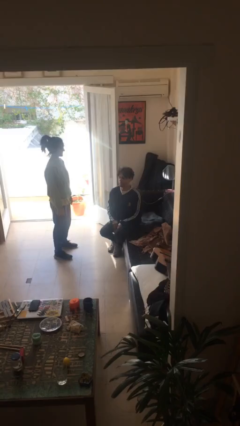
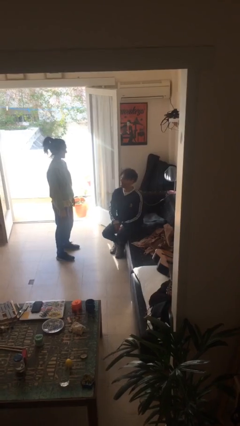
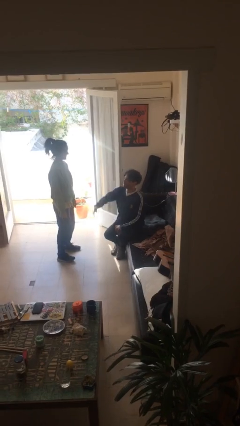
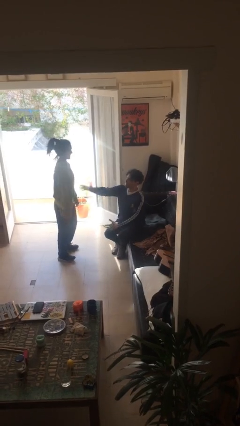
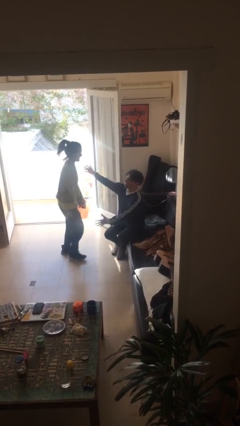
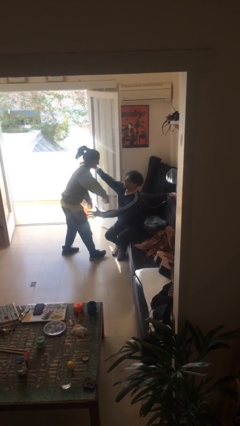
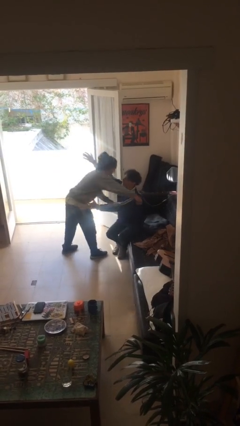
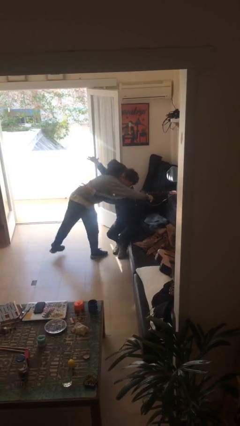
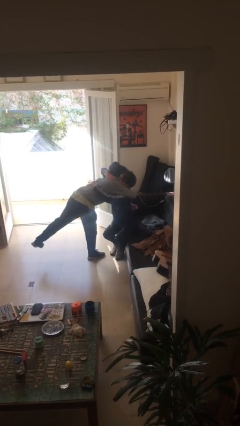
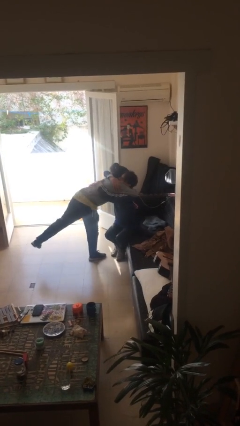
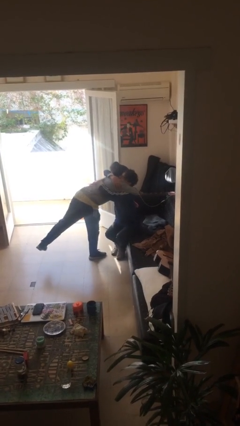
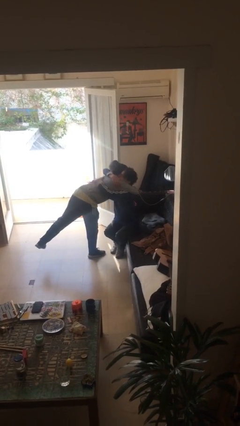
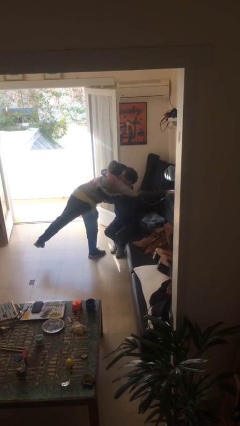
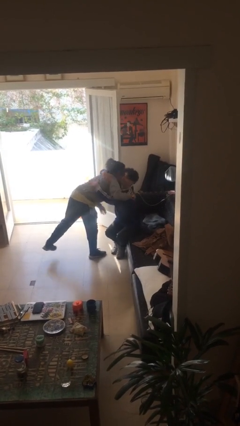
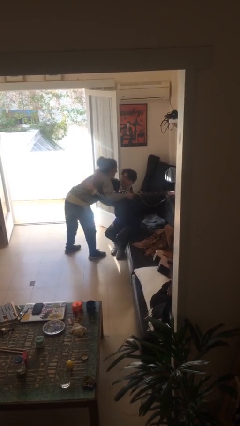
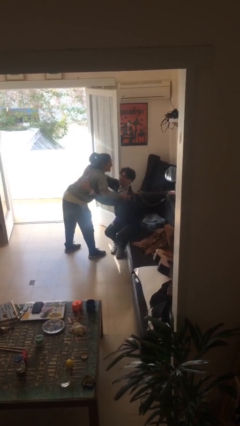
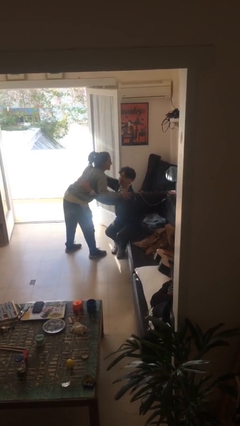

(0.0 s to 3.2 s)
person embraces person

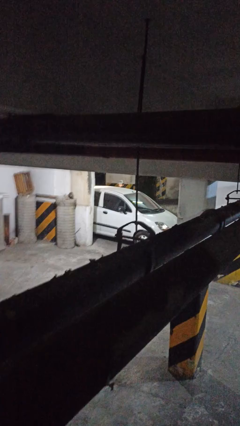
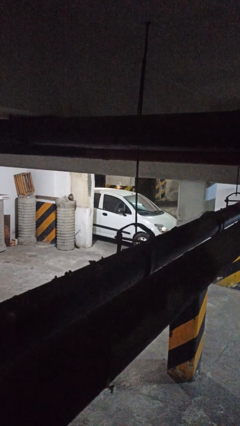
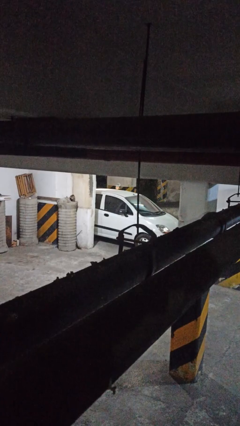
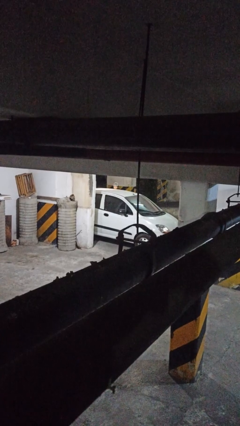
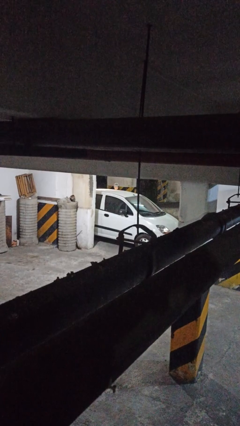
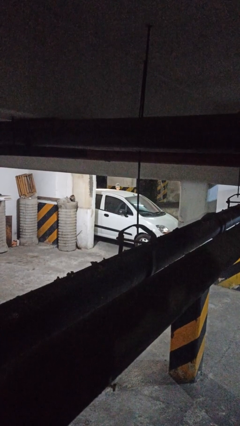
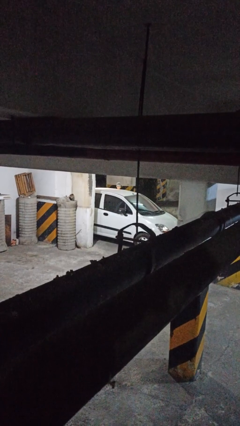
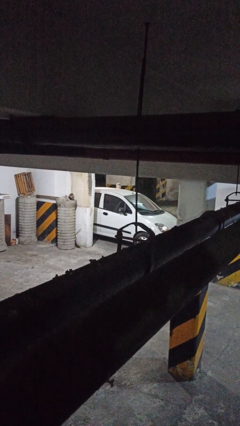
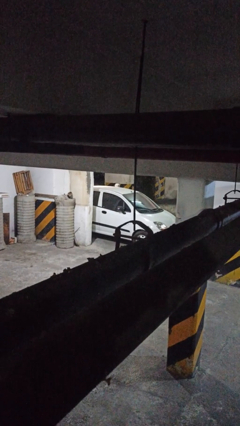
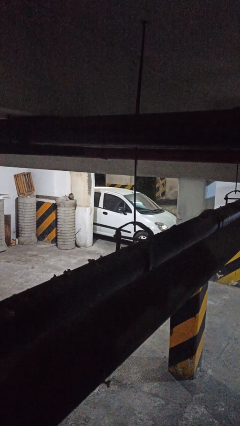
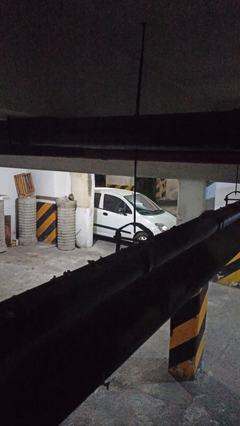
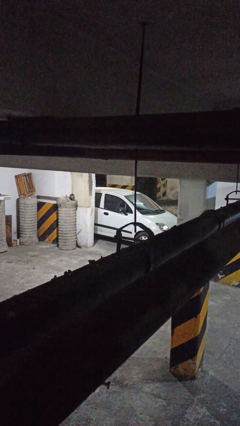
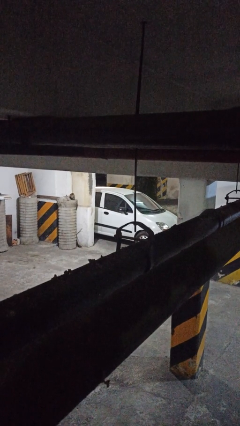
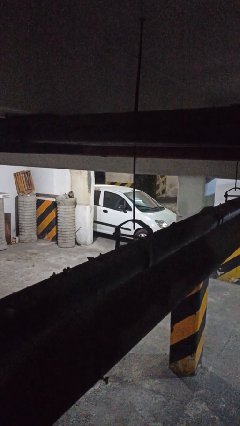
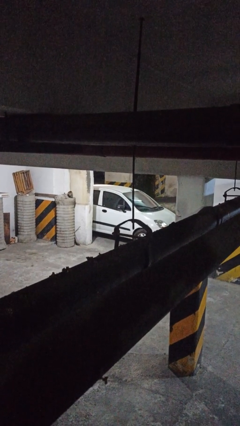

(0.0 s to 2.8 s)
car picks up person

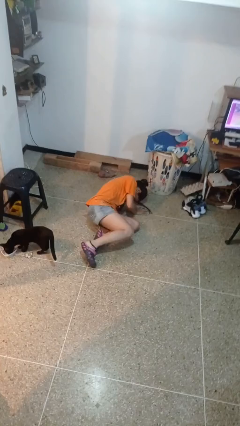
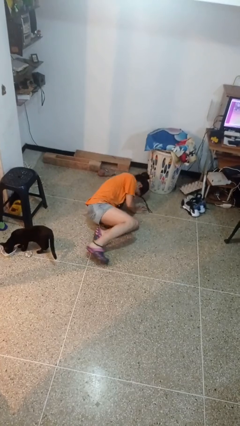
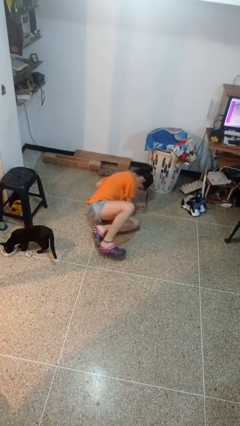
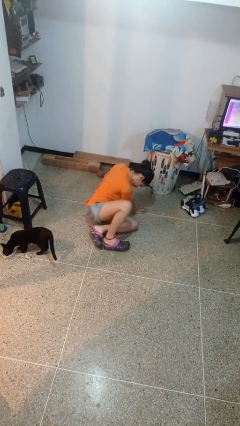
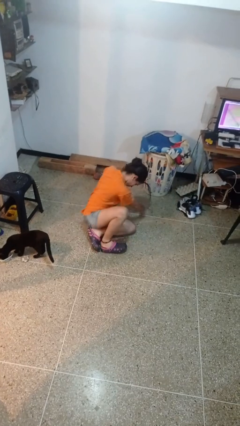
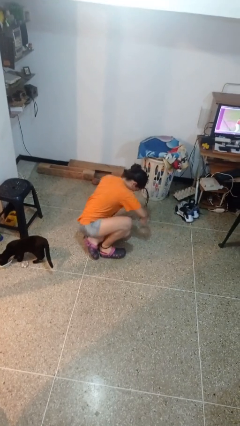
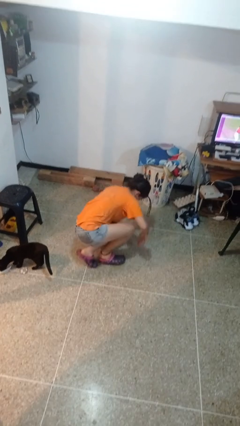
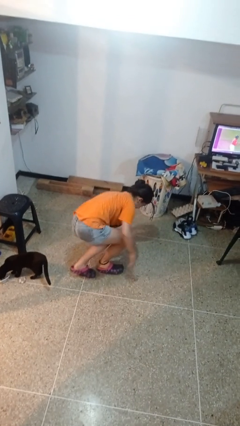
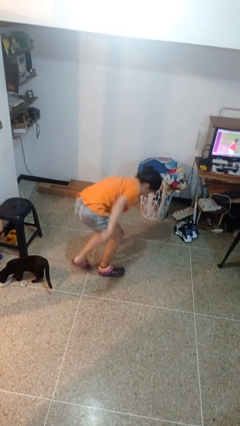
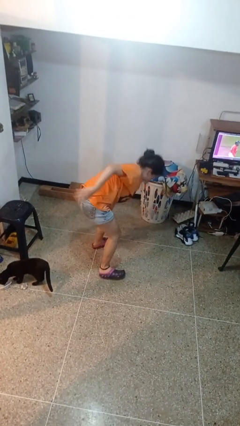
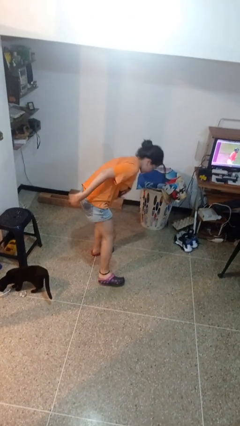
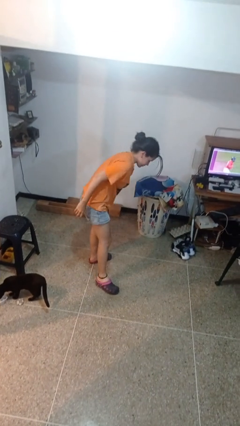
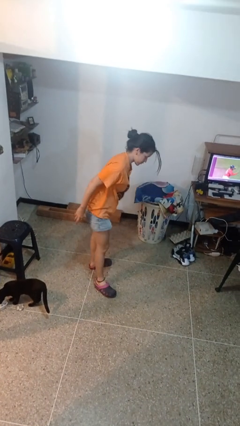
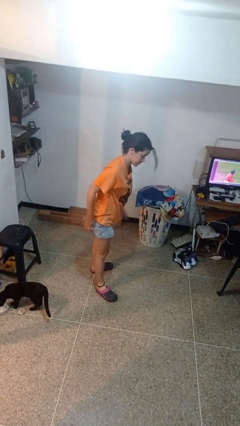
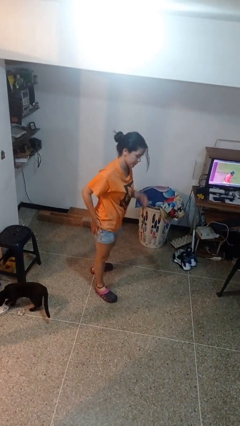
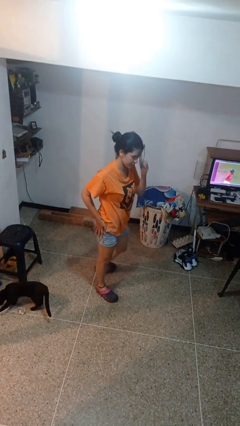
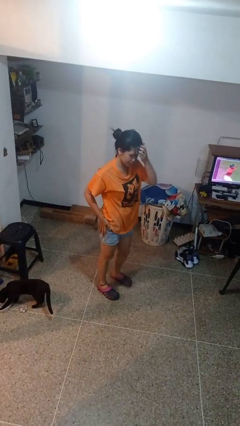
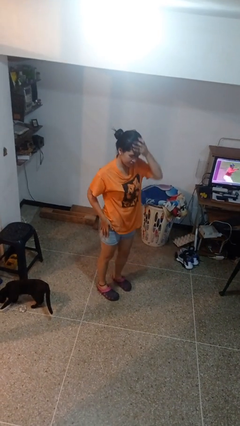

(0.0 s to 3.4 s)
person stands up from floor

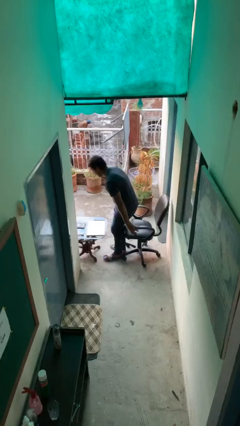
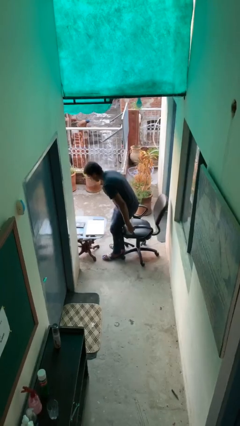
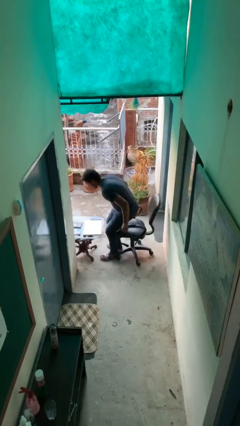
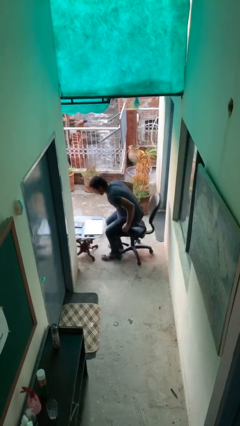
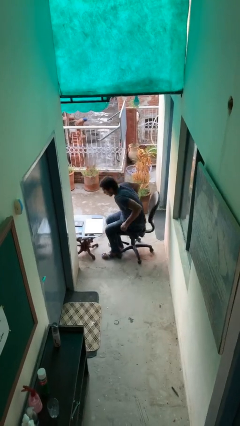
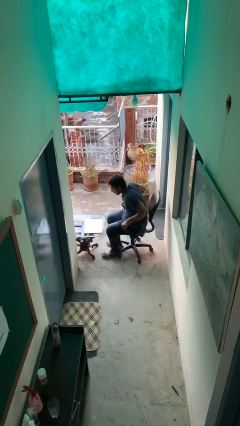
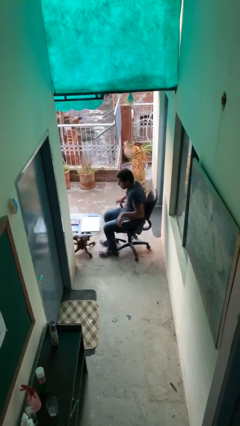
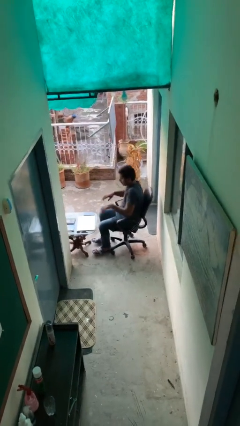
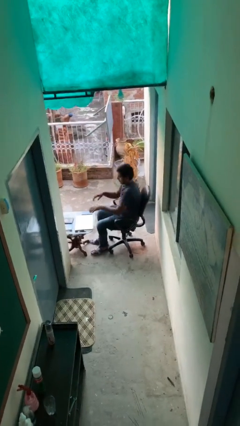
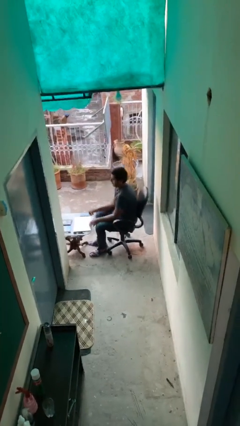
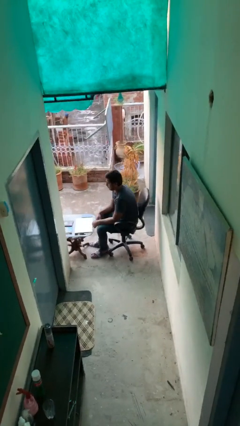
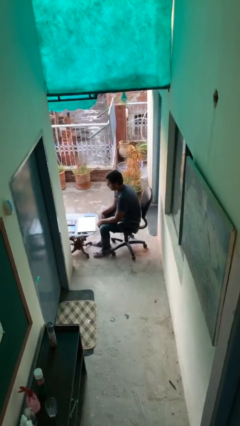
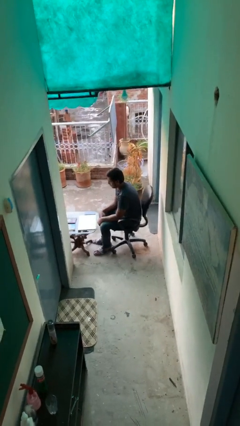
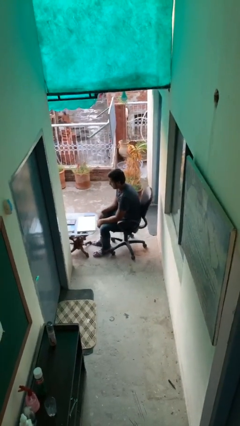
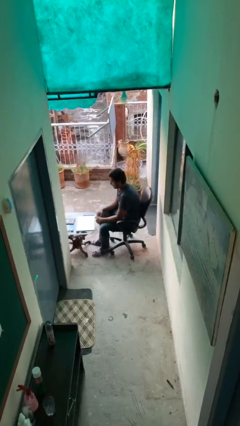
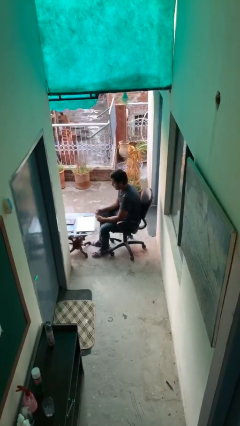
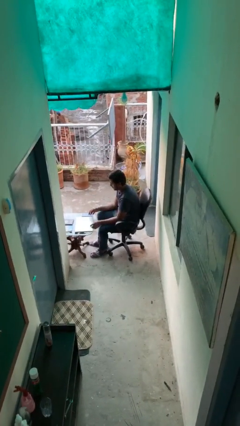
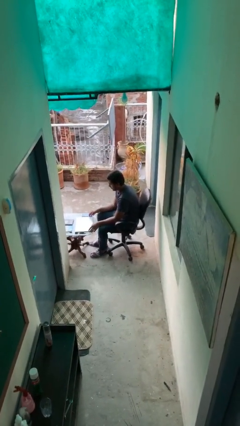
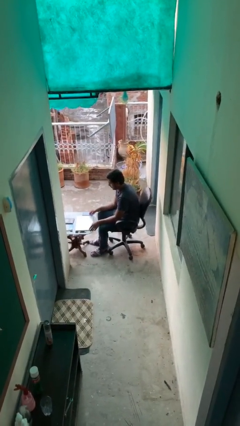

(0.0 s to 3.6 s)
person sits down

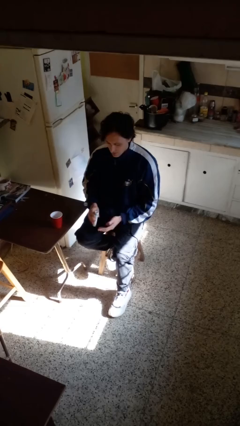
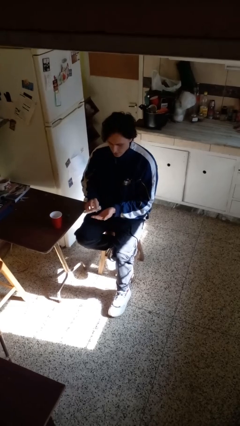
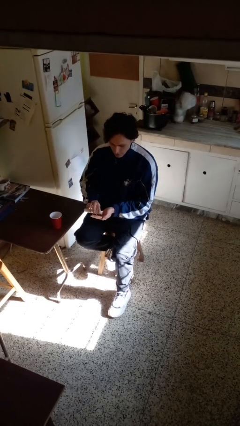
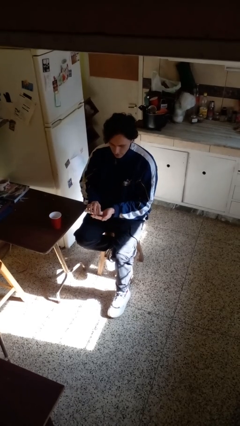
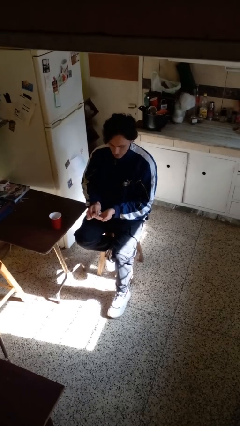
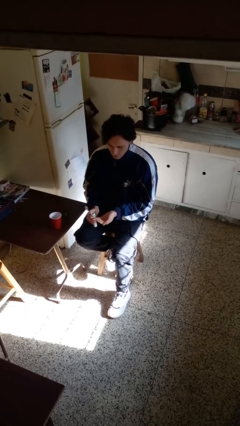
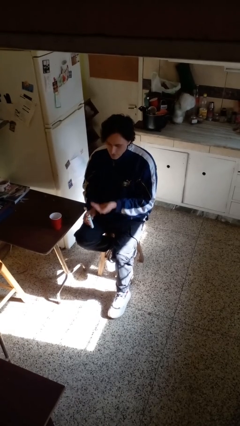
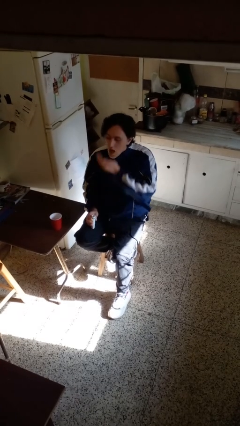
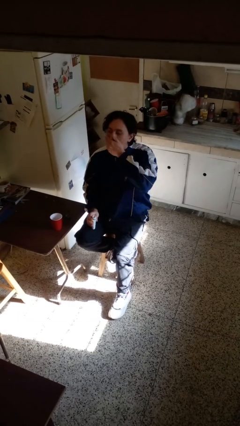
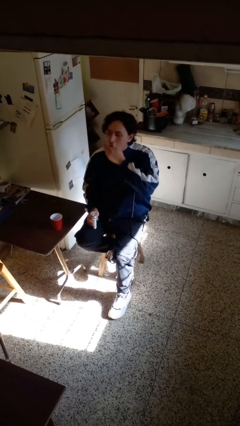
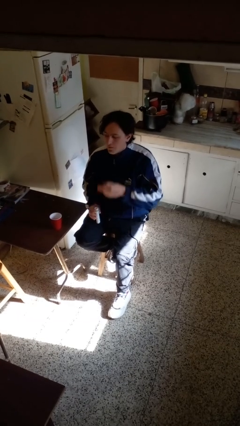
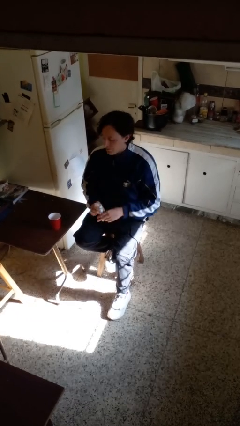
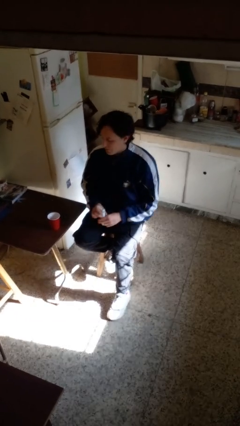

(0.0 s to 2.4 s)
person takes medicine pills

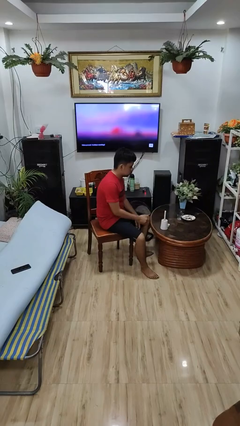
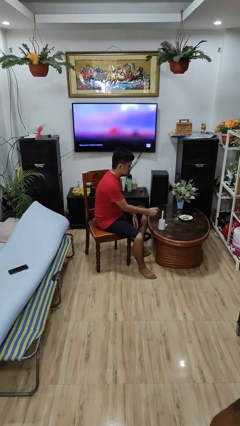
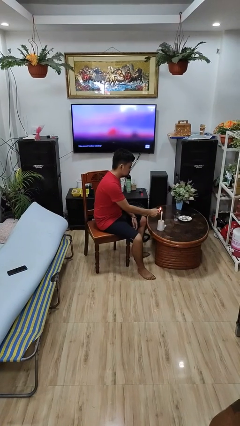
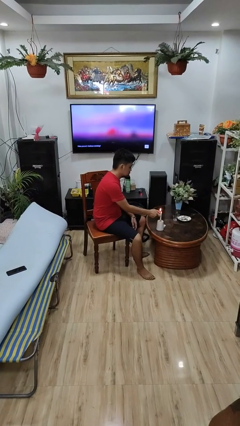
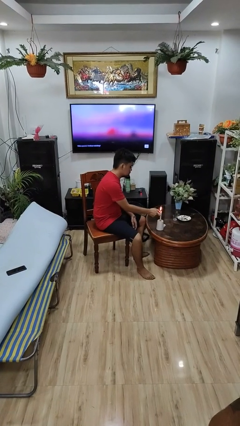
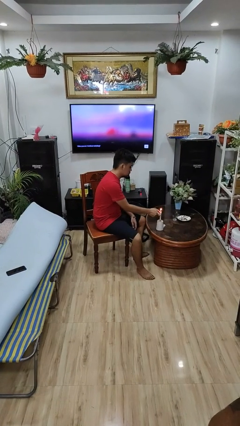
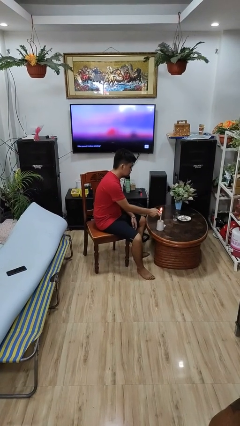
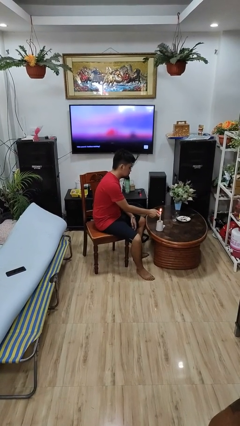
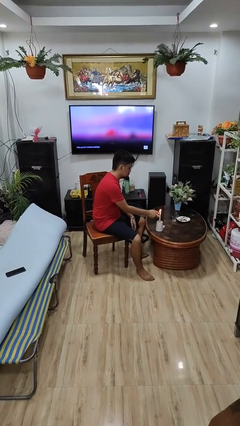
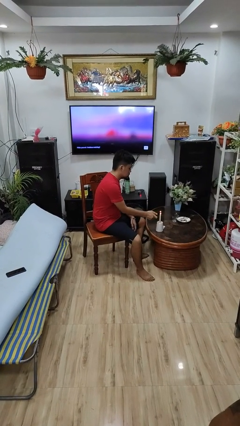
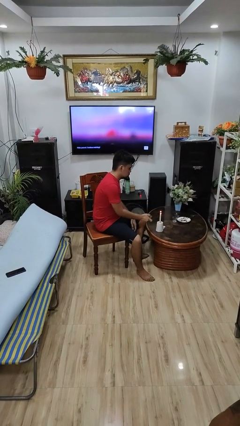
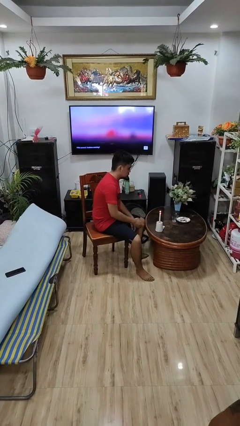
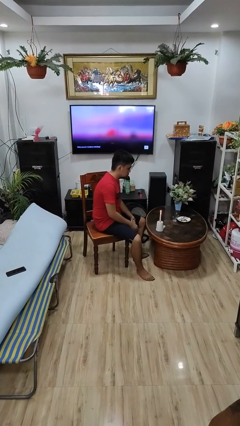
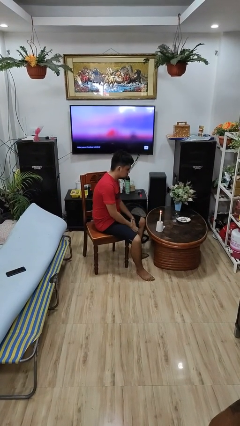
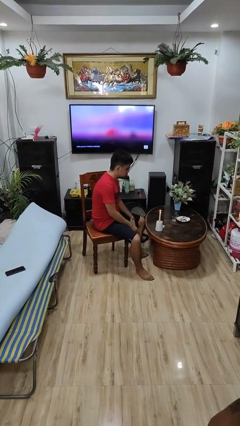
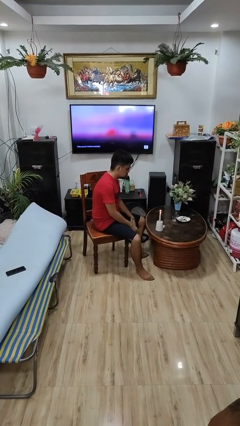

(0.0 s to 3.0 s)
person lights candle
